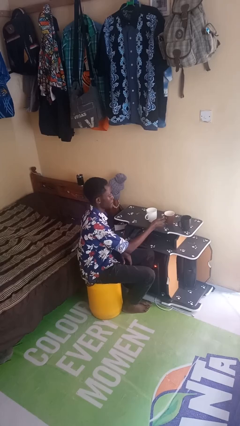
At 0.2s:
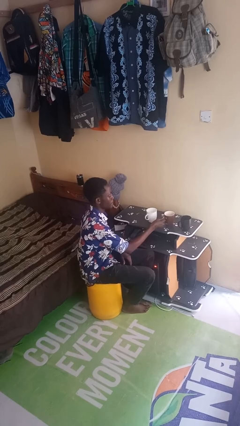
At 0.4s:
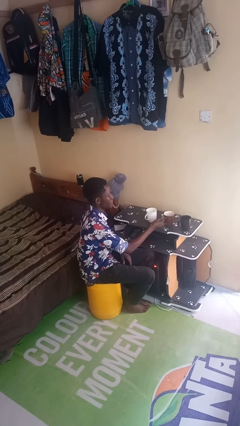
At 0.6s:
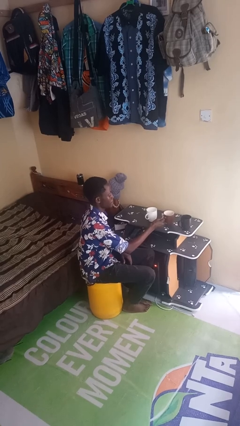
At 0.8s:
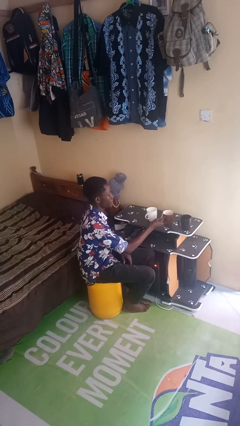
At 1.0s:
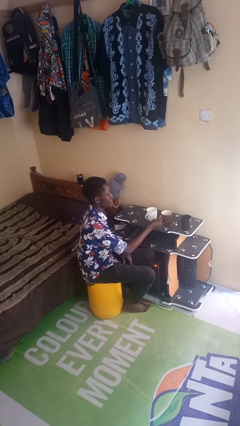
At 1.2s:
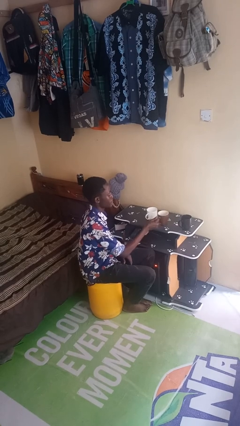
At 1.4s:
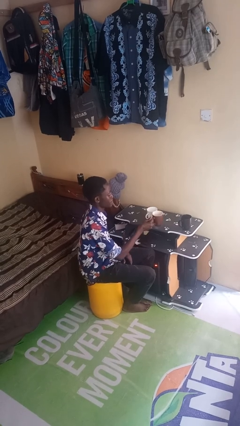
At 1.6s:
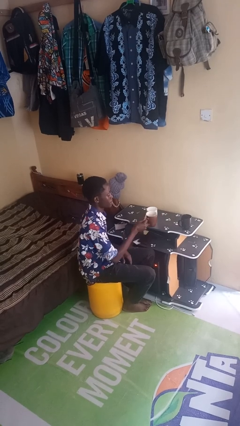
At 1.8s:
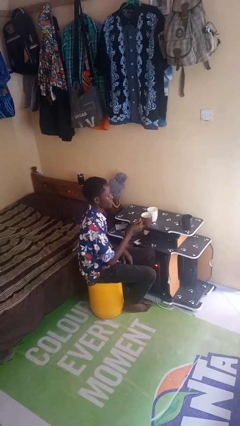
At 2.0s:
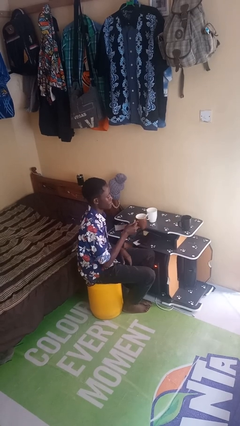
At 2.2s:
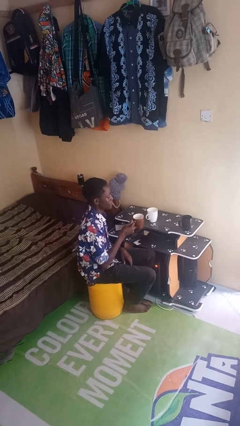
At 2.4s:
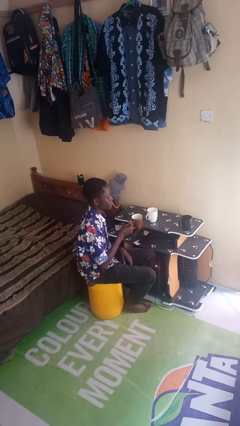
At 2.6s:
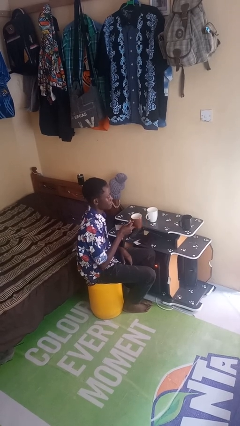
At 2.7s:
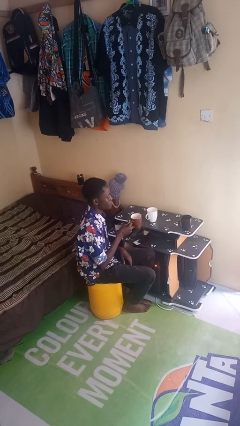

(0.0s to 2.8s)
person picks up object from table

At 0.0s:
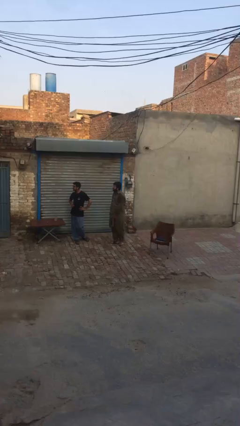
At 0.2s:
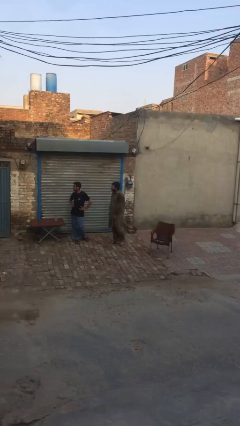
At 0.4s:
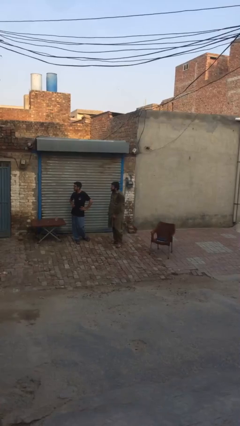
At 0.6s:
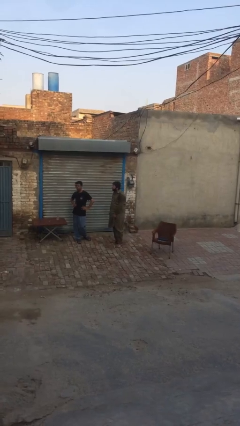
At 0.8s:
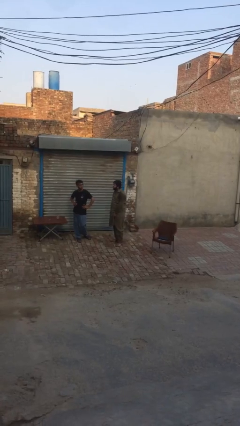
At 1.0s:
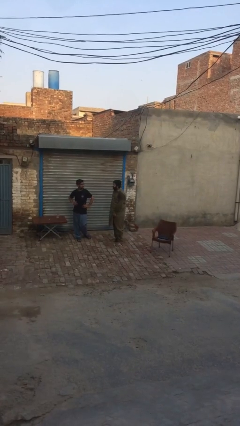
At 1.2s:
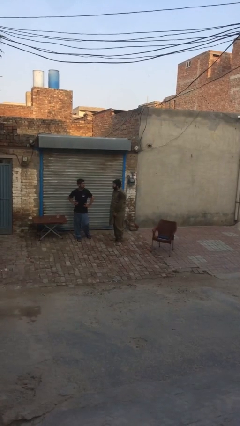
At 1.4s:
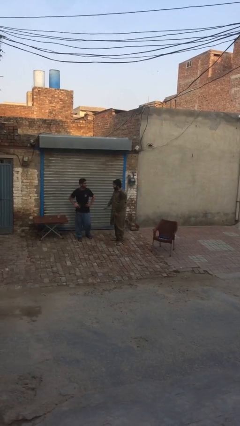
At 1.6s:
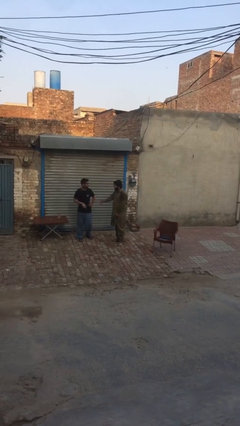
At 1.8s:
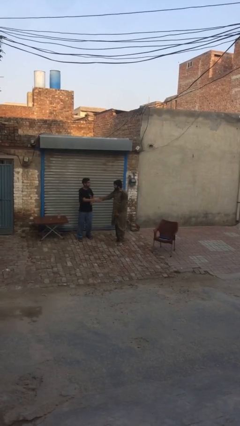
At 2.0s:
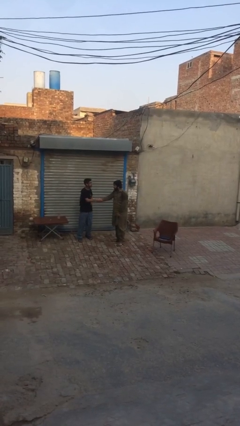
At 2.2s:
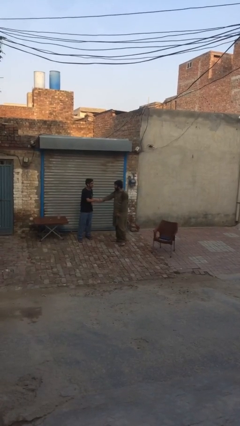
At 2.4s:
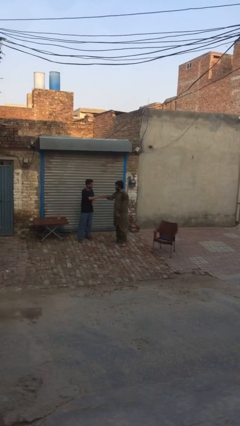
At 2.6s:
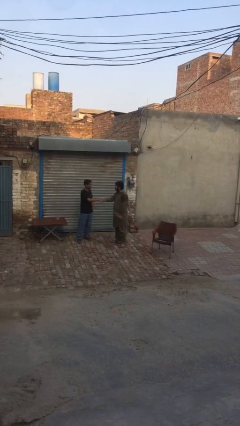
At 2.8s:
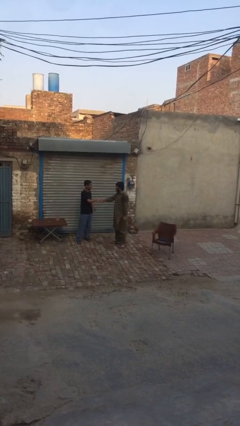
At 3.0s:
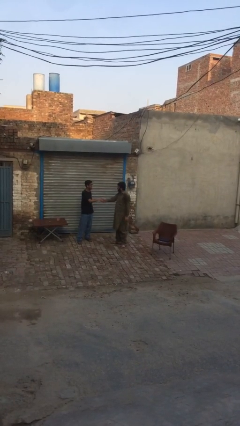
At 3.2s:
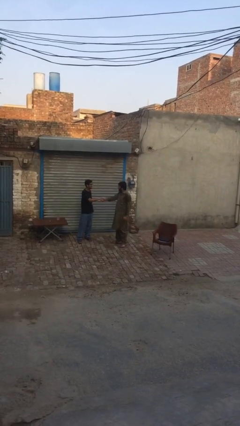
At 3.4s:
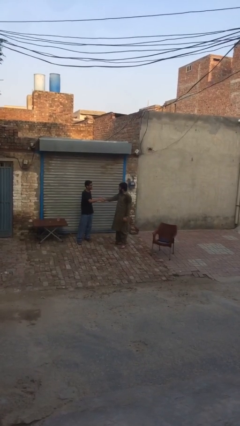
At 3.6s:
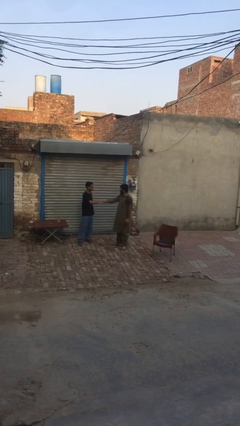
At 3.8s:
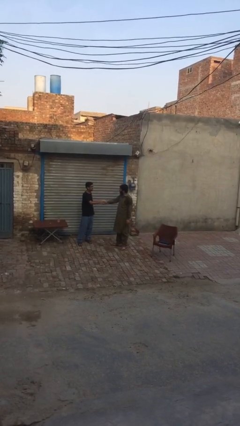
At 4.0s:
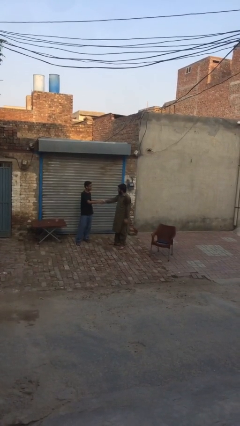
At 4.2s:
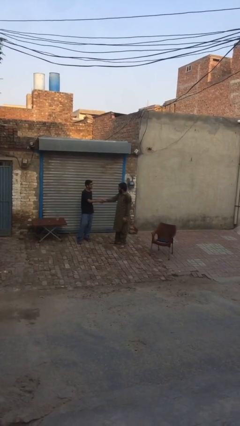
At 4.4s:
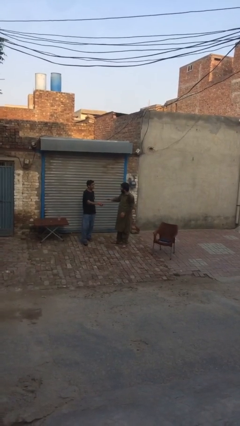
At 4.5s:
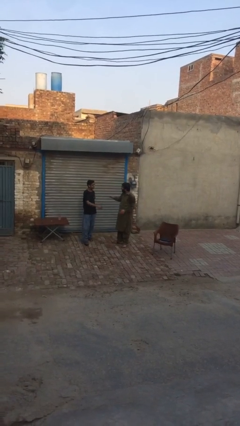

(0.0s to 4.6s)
person shakes hand

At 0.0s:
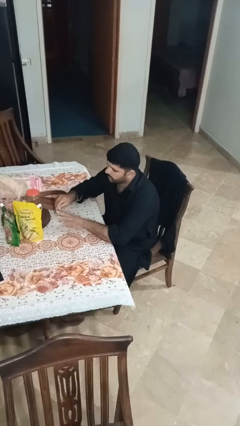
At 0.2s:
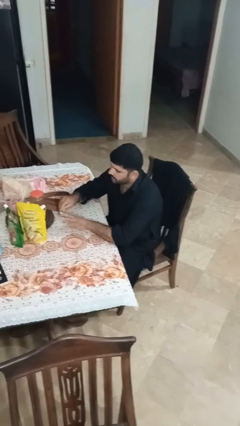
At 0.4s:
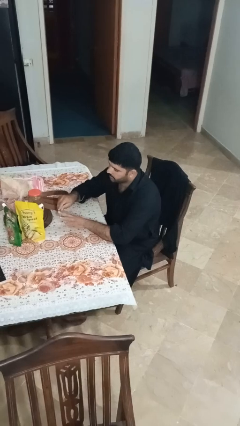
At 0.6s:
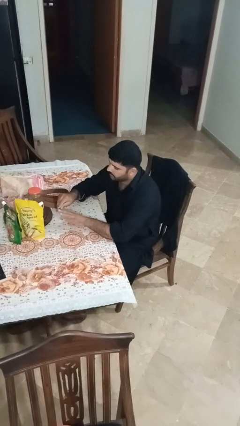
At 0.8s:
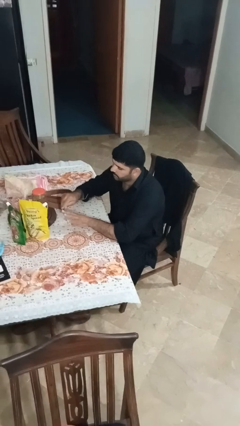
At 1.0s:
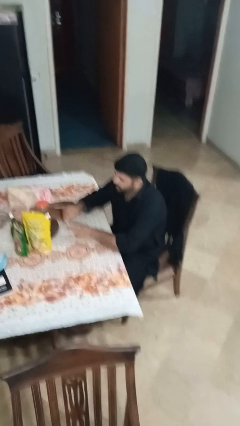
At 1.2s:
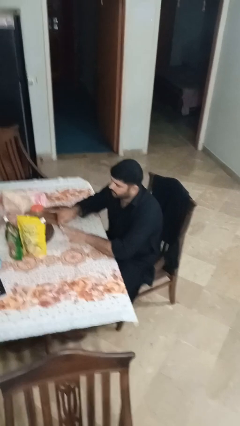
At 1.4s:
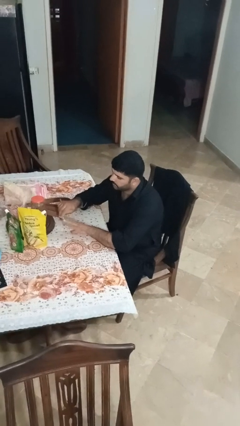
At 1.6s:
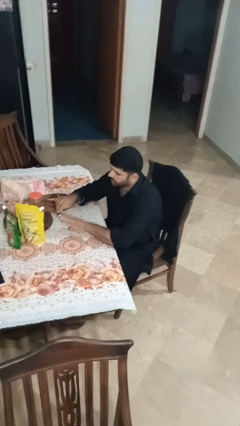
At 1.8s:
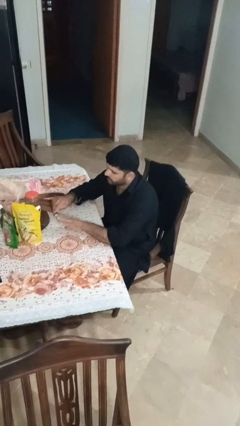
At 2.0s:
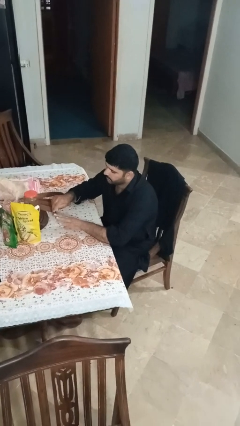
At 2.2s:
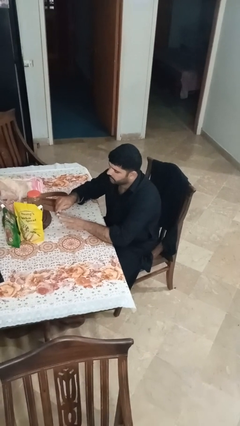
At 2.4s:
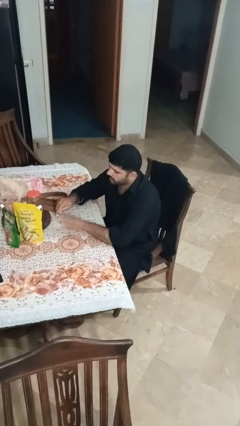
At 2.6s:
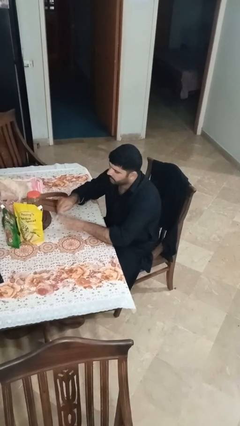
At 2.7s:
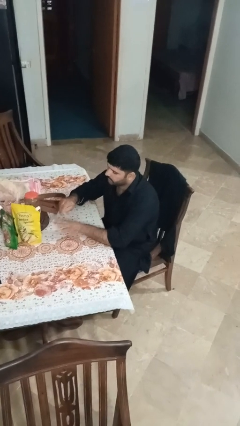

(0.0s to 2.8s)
person files fingernails

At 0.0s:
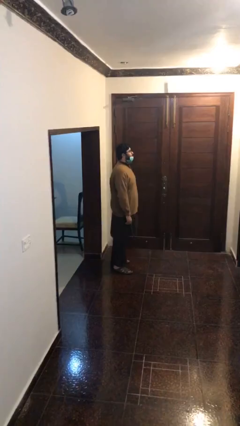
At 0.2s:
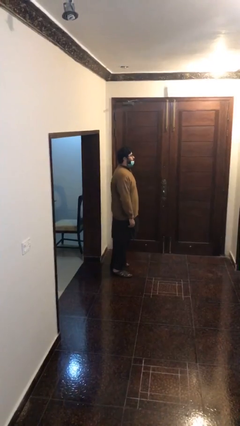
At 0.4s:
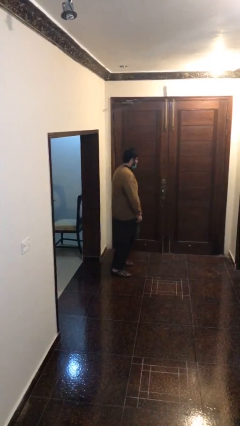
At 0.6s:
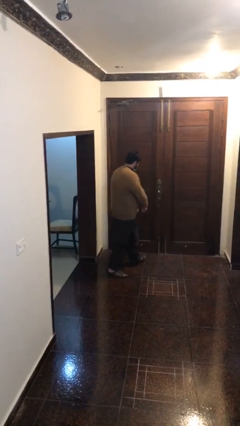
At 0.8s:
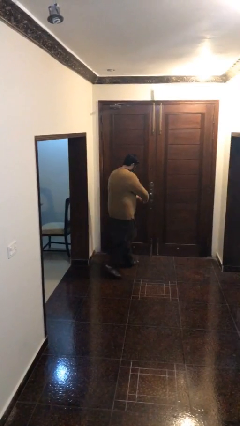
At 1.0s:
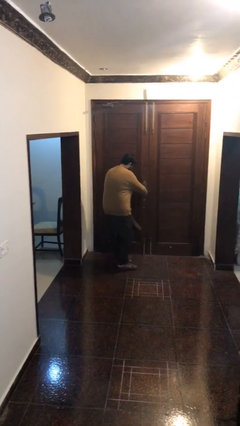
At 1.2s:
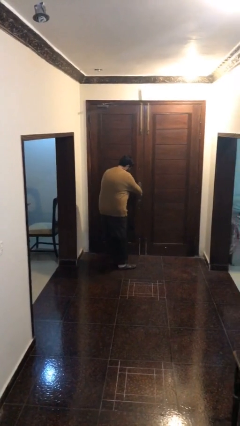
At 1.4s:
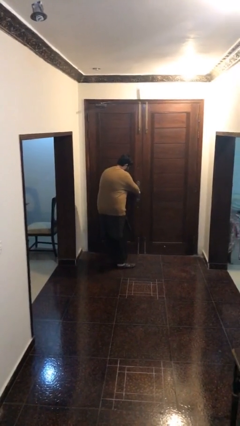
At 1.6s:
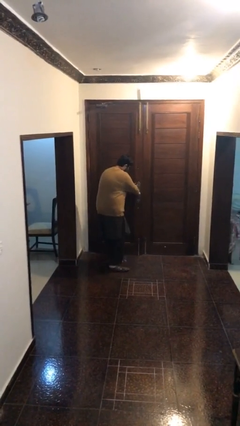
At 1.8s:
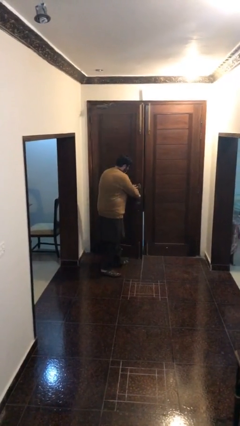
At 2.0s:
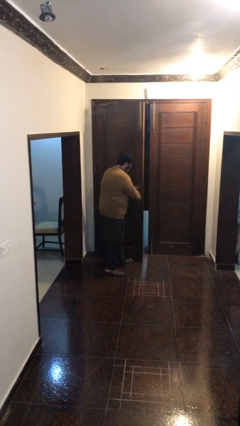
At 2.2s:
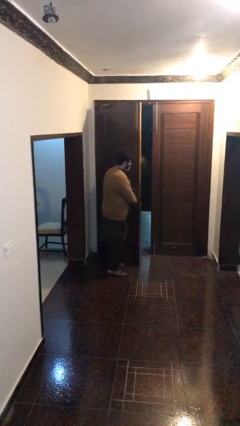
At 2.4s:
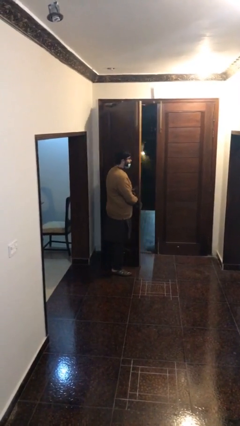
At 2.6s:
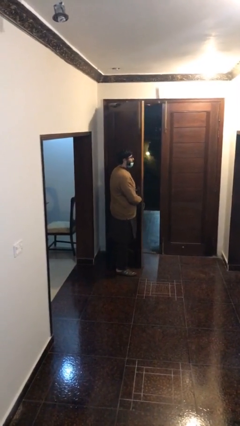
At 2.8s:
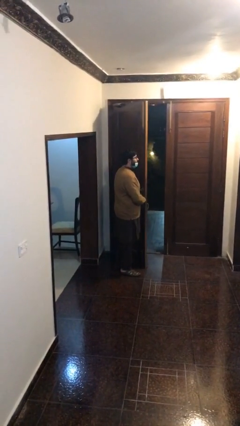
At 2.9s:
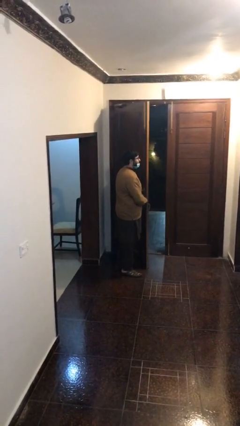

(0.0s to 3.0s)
person opens facility door

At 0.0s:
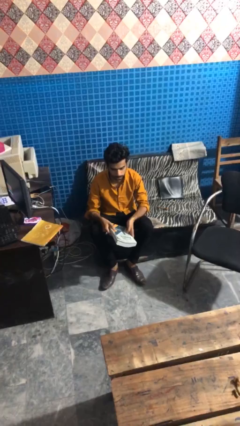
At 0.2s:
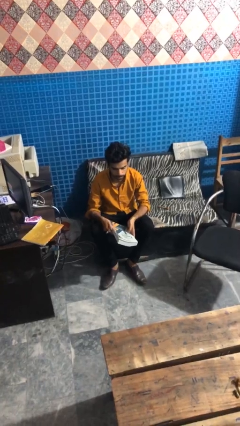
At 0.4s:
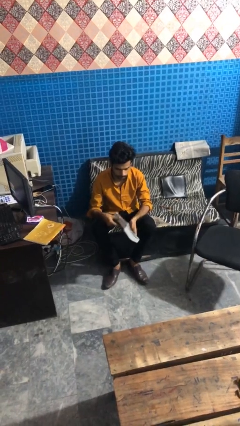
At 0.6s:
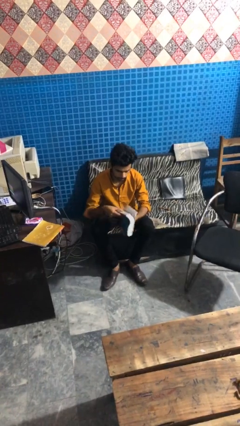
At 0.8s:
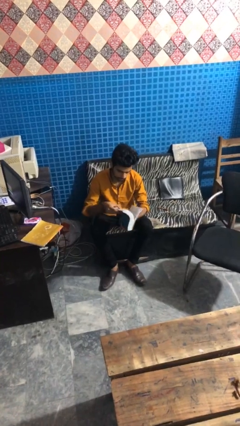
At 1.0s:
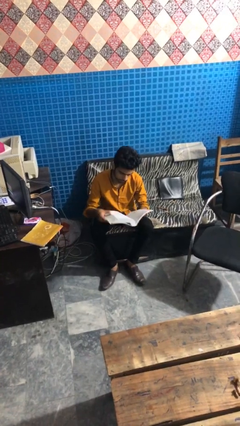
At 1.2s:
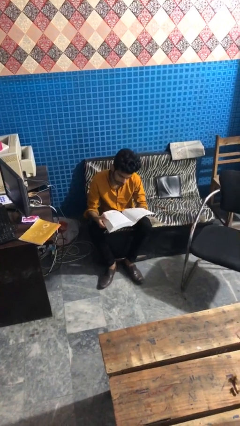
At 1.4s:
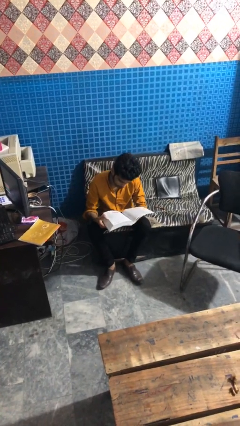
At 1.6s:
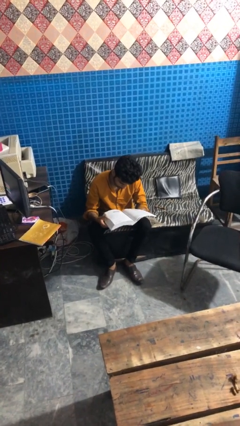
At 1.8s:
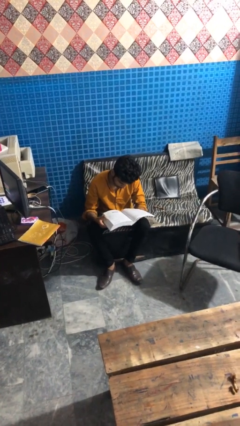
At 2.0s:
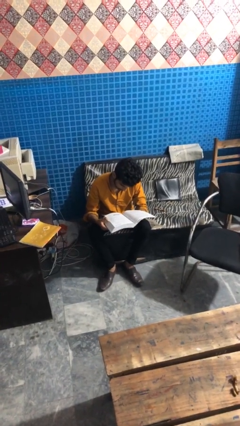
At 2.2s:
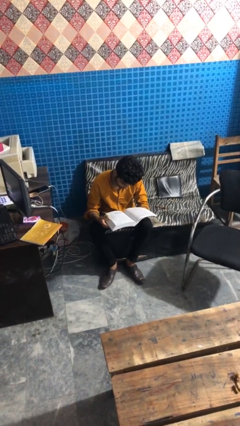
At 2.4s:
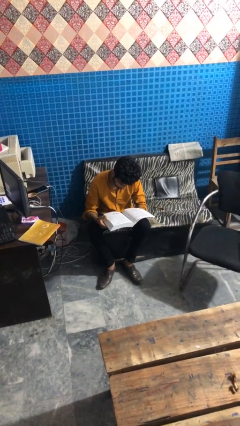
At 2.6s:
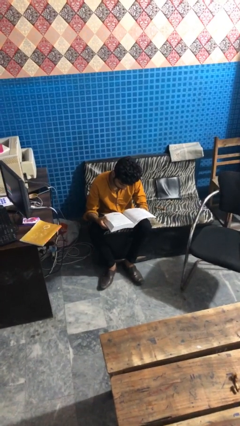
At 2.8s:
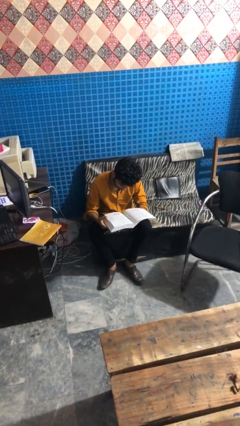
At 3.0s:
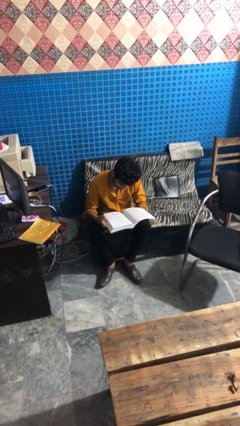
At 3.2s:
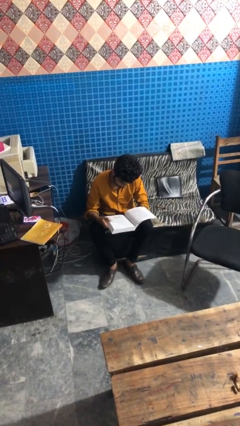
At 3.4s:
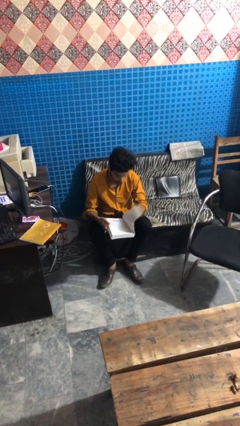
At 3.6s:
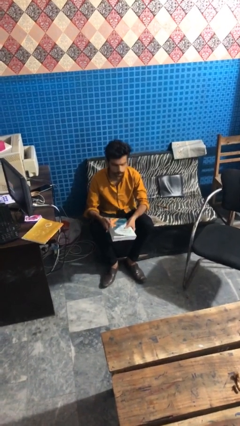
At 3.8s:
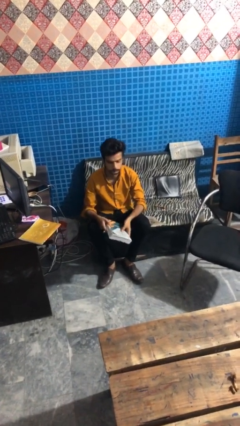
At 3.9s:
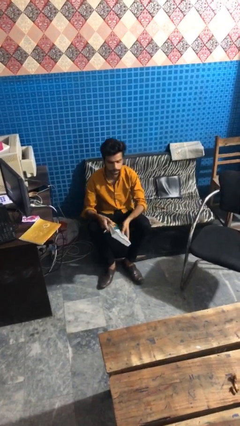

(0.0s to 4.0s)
person reads book

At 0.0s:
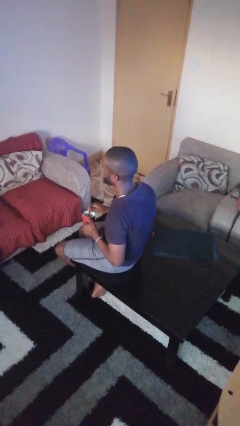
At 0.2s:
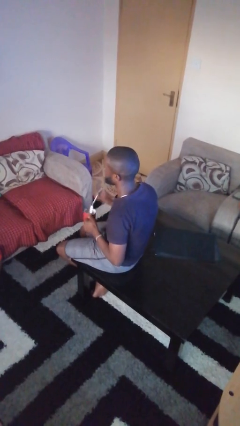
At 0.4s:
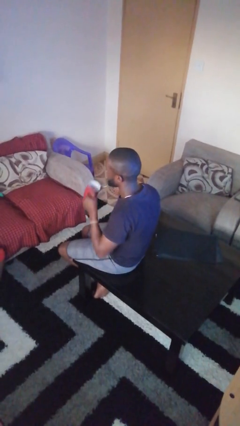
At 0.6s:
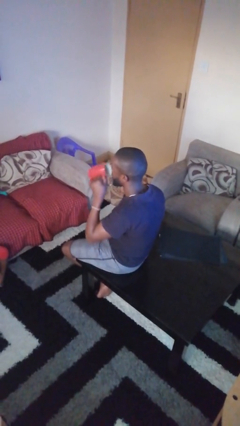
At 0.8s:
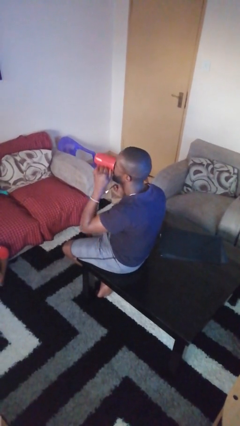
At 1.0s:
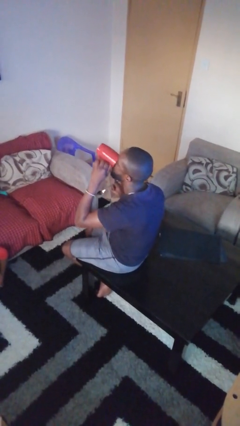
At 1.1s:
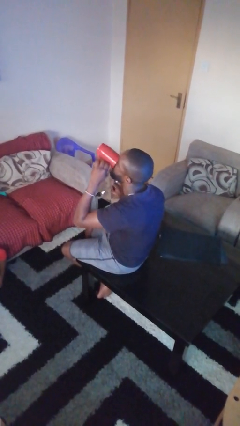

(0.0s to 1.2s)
person drinks from mug
